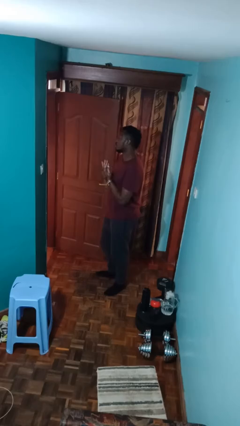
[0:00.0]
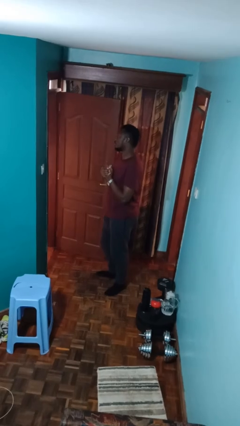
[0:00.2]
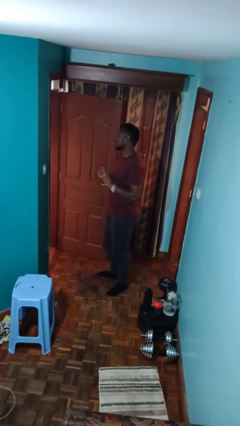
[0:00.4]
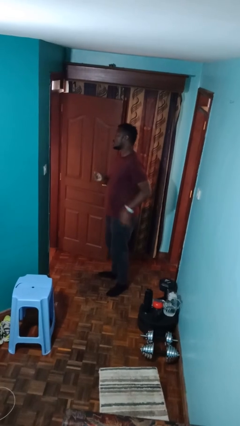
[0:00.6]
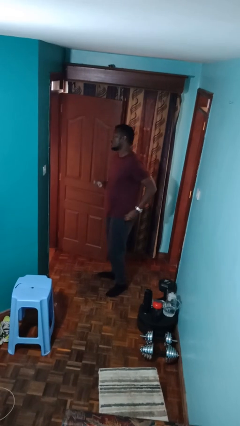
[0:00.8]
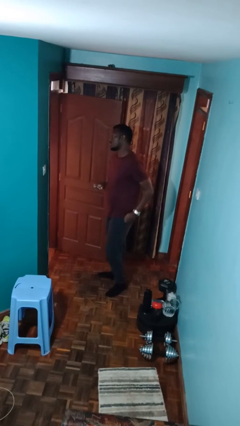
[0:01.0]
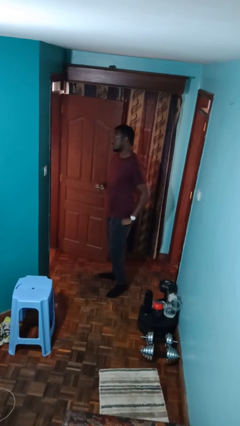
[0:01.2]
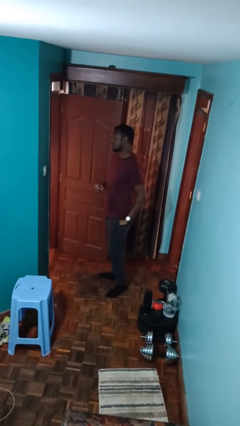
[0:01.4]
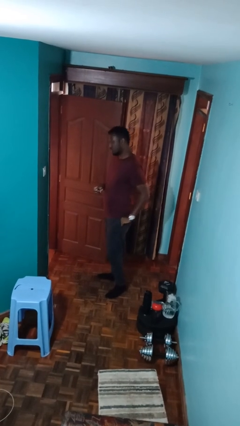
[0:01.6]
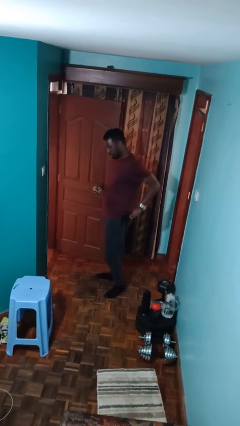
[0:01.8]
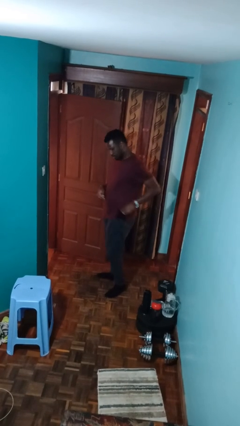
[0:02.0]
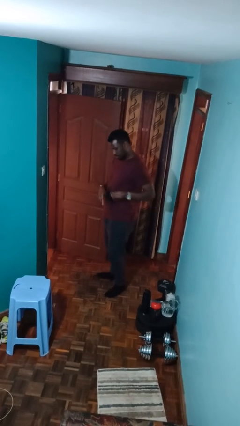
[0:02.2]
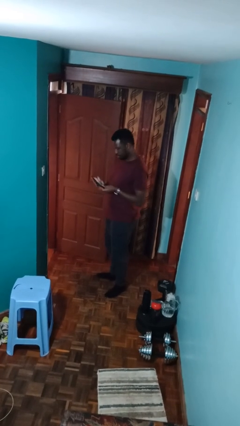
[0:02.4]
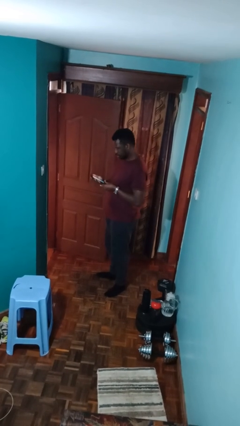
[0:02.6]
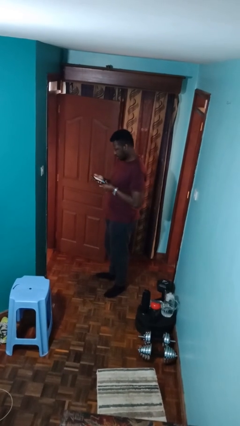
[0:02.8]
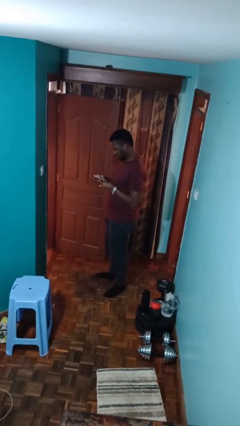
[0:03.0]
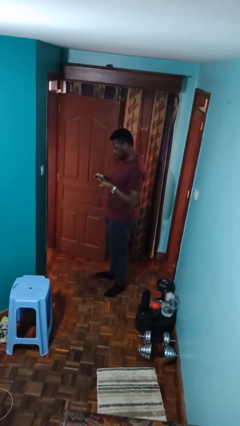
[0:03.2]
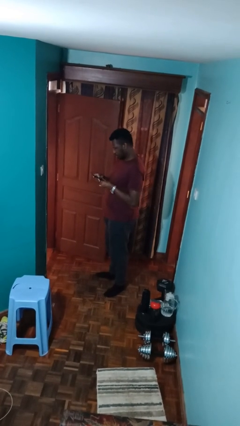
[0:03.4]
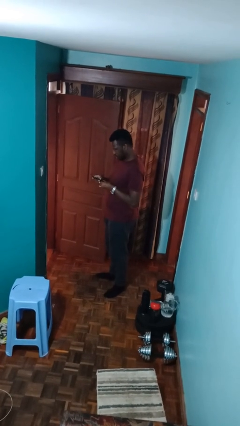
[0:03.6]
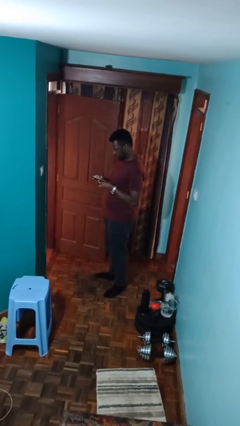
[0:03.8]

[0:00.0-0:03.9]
person takes phone from pocket

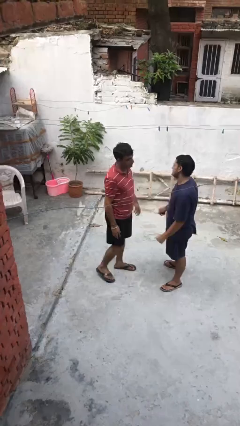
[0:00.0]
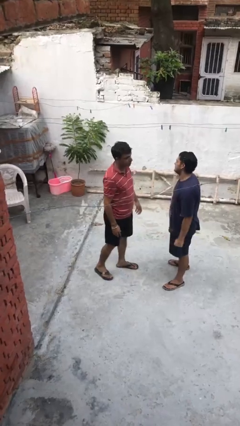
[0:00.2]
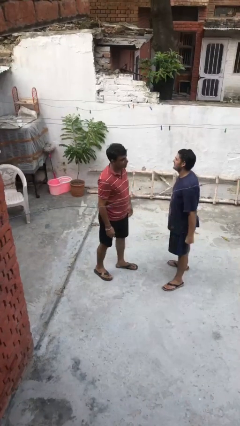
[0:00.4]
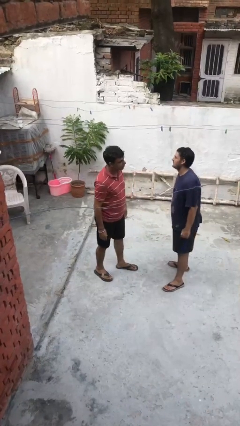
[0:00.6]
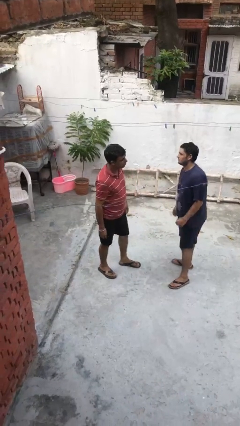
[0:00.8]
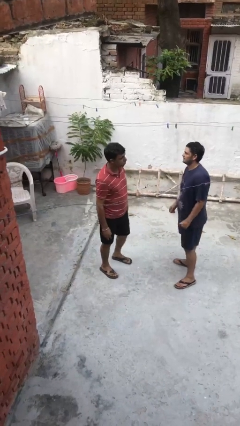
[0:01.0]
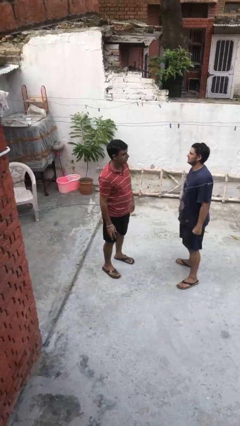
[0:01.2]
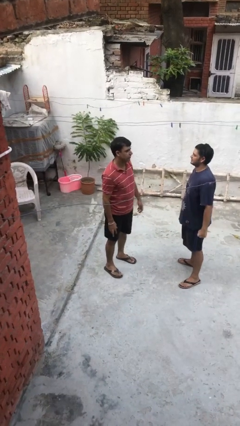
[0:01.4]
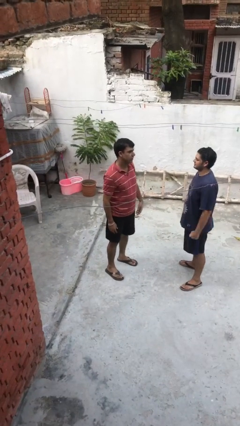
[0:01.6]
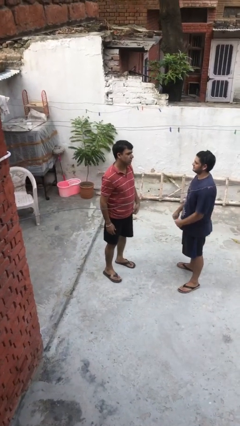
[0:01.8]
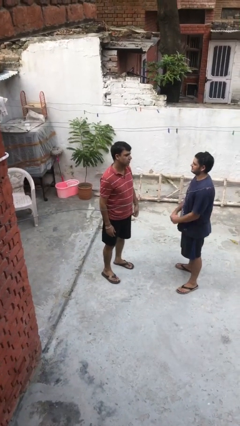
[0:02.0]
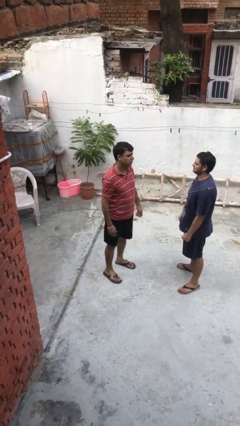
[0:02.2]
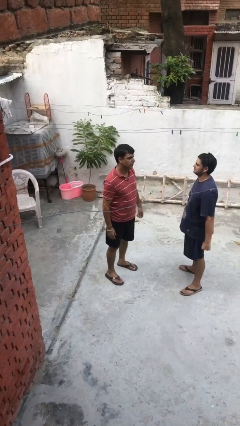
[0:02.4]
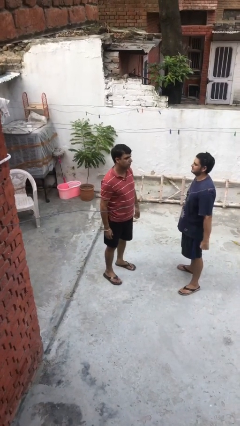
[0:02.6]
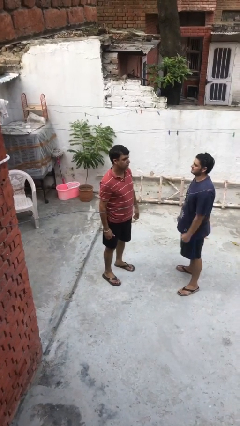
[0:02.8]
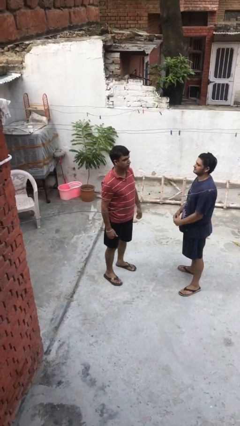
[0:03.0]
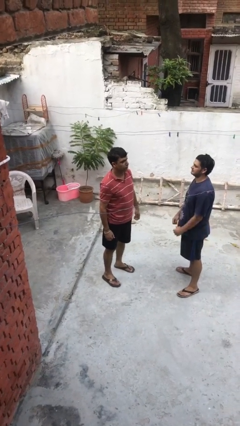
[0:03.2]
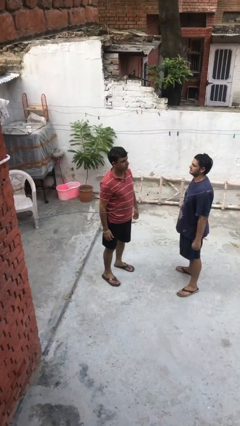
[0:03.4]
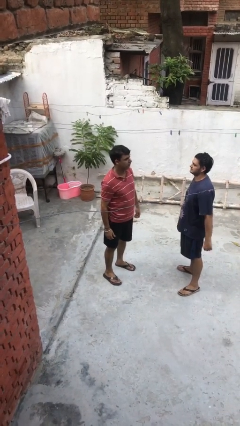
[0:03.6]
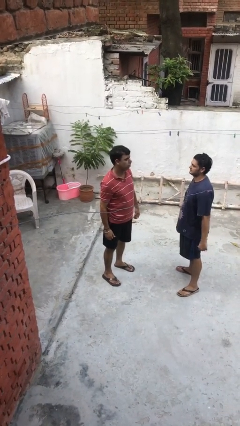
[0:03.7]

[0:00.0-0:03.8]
person talks to person

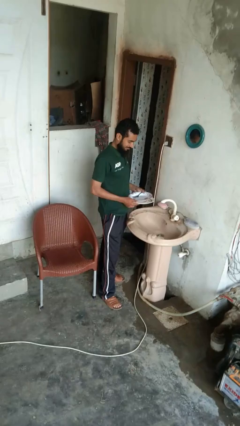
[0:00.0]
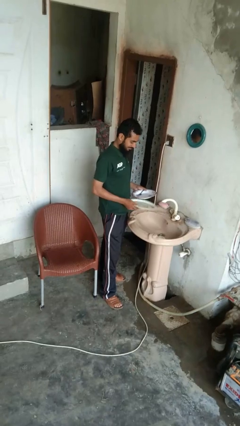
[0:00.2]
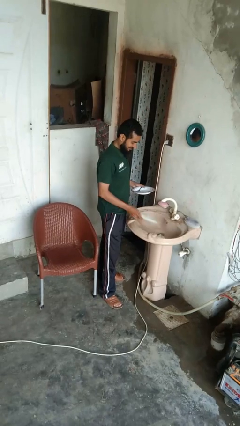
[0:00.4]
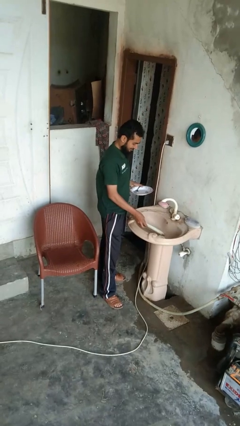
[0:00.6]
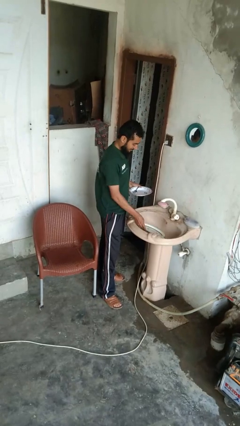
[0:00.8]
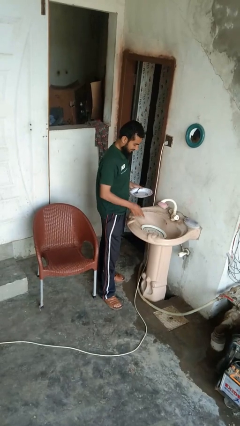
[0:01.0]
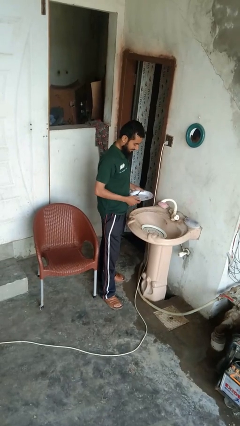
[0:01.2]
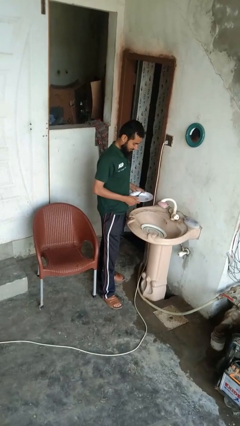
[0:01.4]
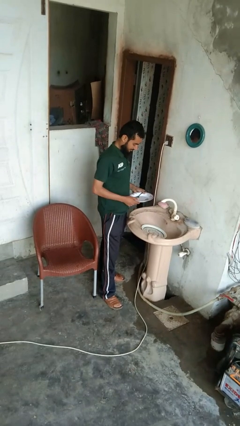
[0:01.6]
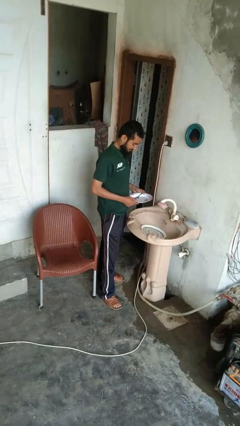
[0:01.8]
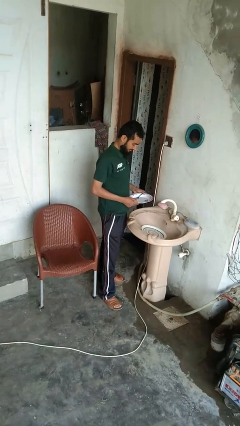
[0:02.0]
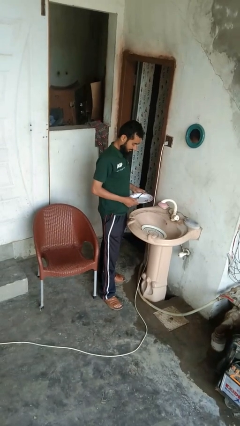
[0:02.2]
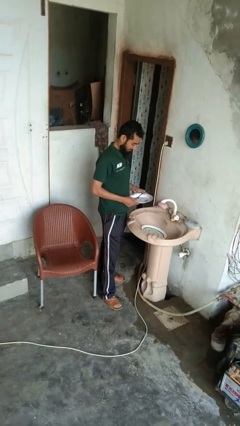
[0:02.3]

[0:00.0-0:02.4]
person loads dishwasher

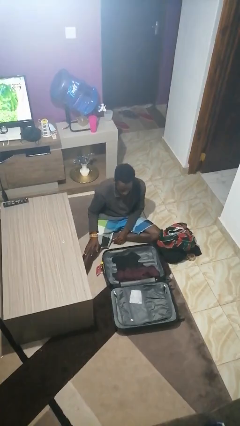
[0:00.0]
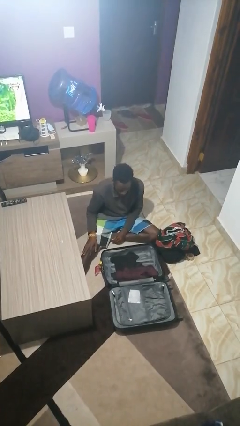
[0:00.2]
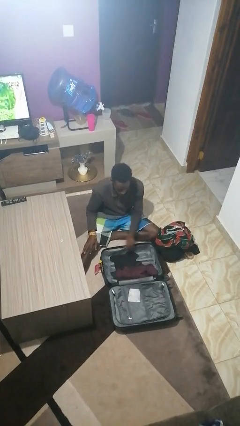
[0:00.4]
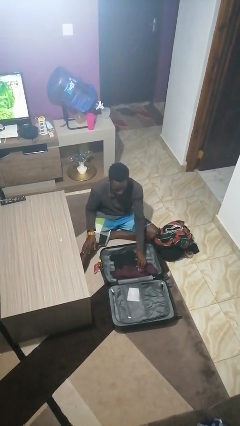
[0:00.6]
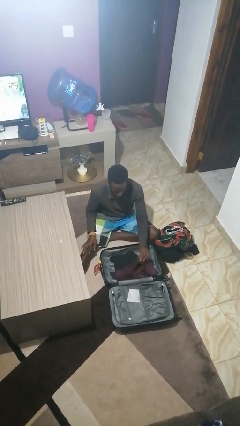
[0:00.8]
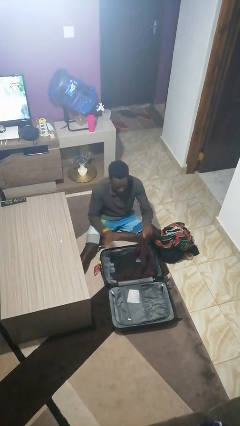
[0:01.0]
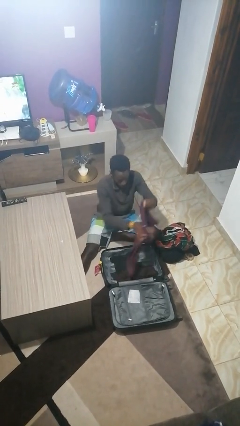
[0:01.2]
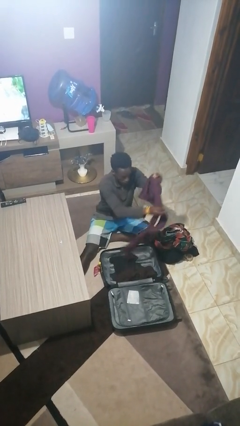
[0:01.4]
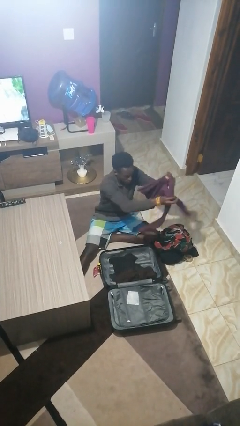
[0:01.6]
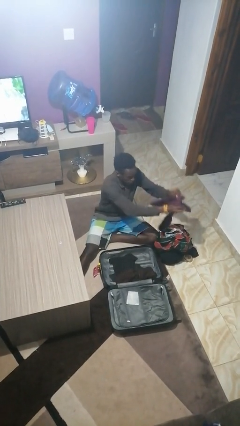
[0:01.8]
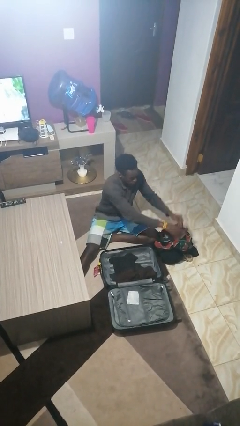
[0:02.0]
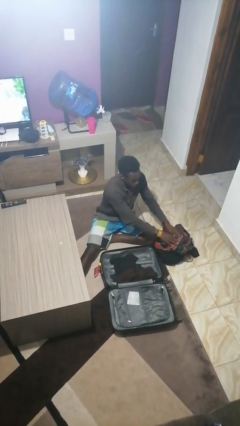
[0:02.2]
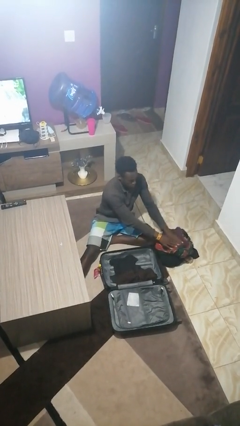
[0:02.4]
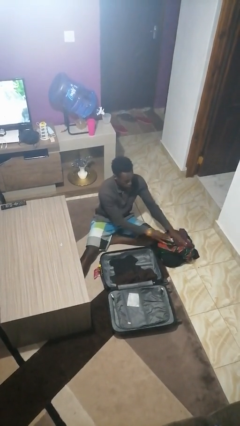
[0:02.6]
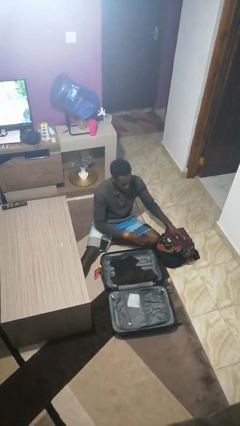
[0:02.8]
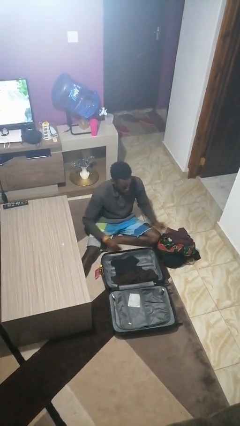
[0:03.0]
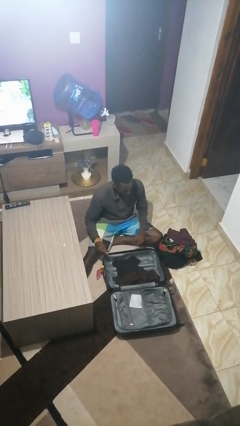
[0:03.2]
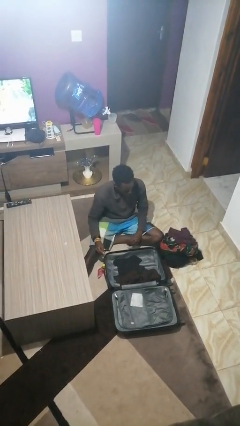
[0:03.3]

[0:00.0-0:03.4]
person unloads clothes from suitcase

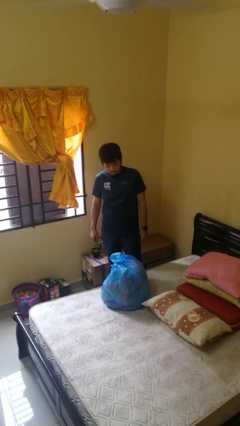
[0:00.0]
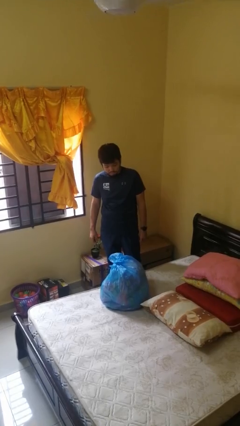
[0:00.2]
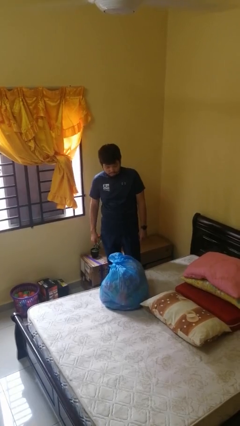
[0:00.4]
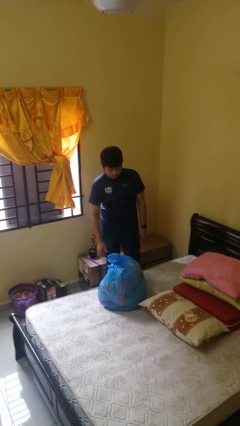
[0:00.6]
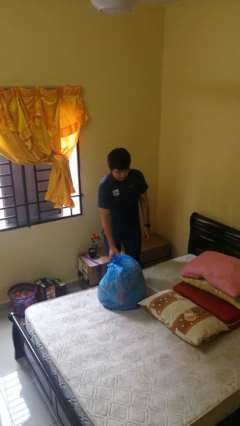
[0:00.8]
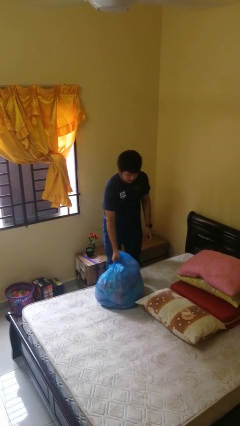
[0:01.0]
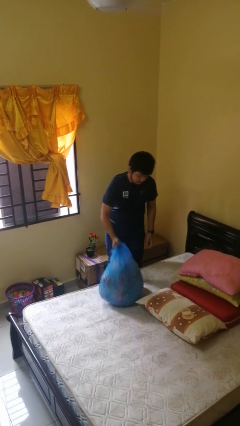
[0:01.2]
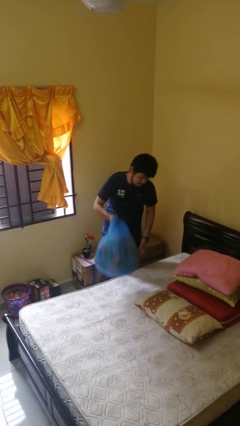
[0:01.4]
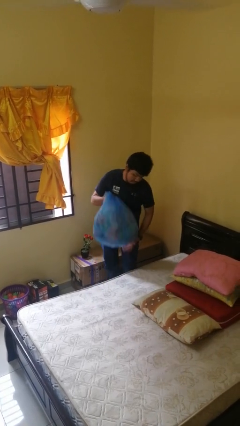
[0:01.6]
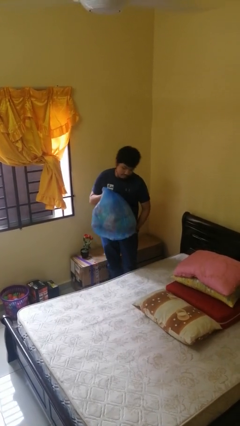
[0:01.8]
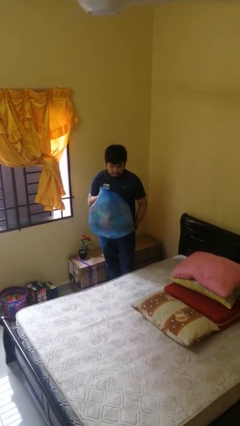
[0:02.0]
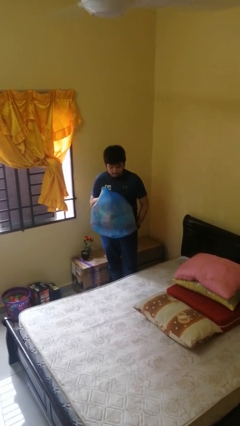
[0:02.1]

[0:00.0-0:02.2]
person picks up object from bed

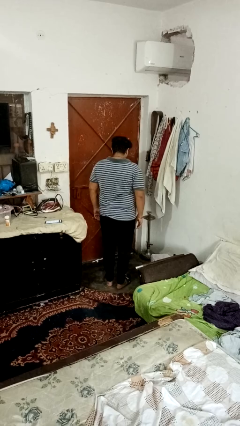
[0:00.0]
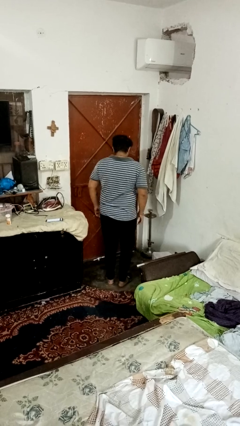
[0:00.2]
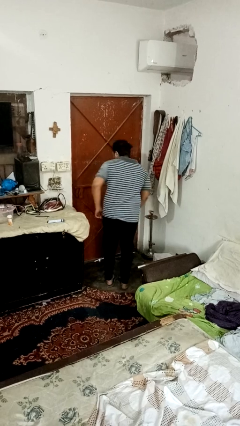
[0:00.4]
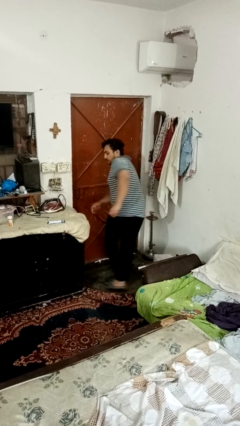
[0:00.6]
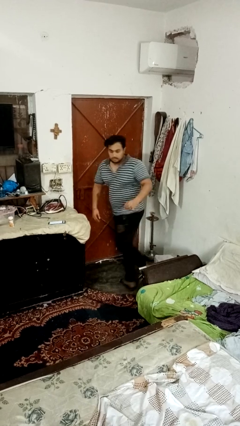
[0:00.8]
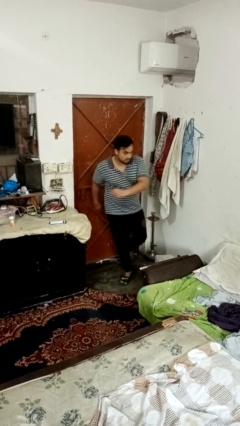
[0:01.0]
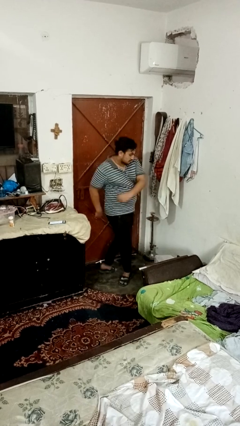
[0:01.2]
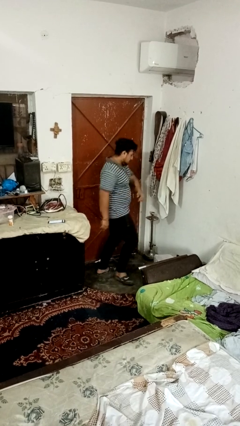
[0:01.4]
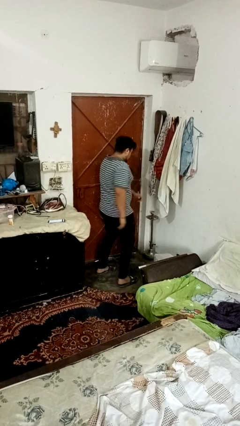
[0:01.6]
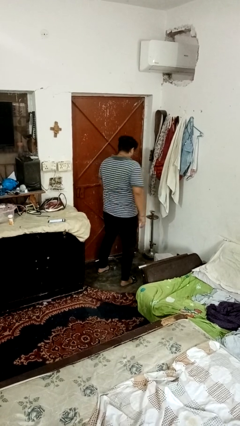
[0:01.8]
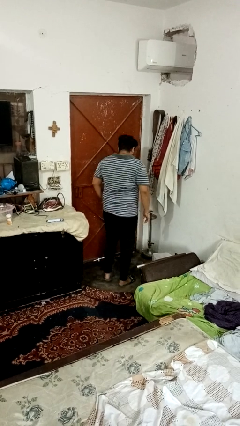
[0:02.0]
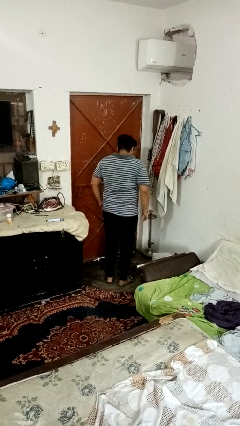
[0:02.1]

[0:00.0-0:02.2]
person twirls
